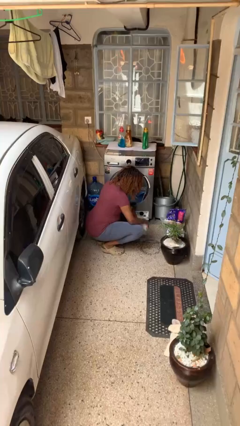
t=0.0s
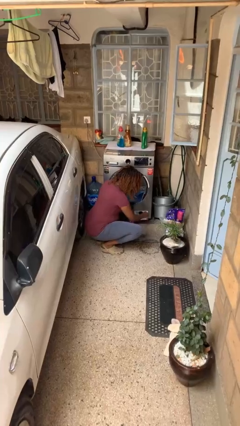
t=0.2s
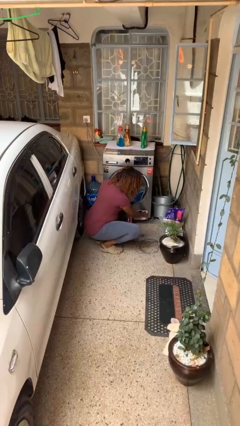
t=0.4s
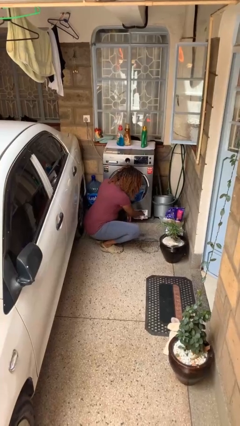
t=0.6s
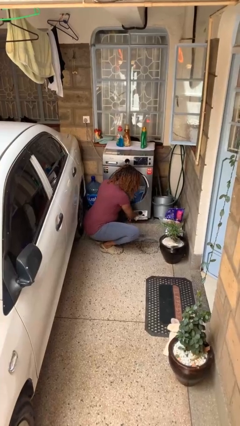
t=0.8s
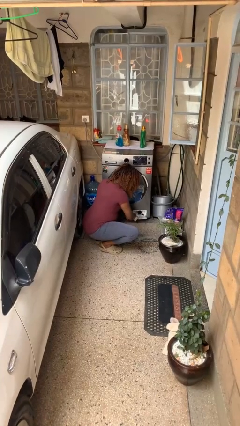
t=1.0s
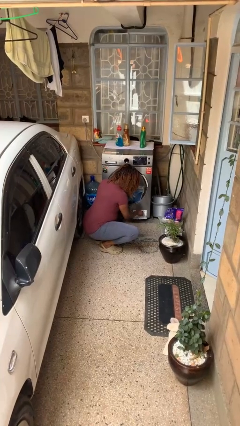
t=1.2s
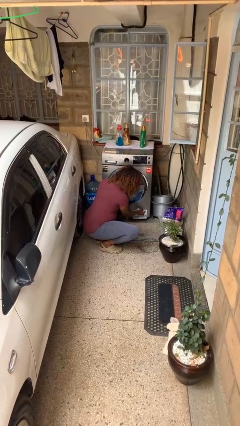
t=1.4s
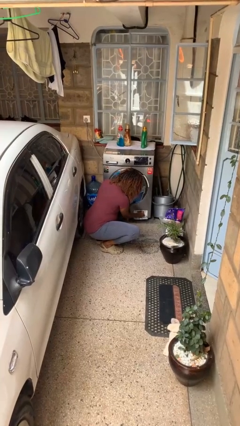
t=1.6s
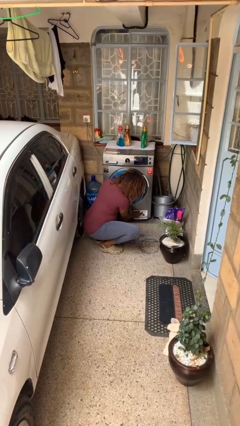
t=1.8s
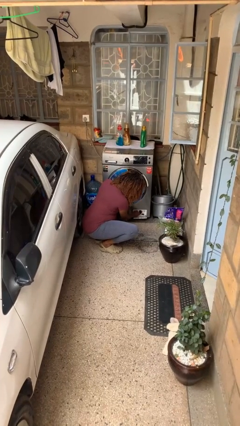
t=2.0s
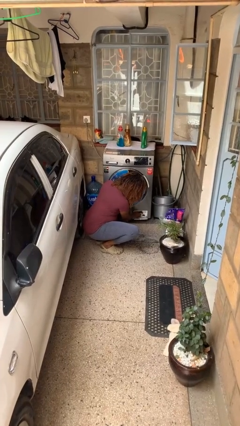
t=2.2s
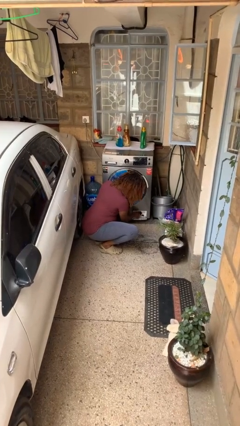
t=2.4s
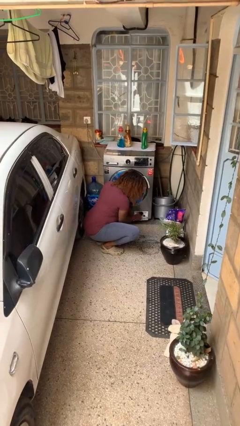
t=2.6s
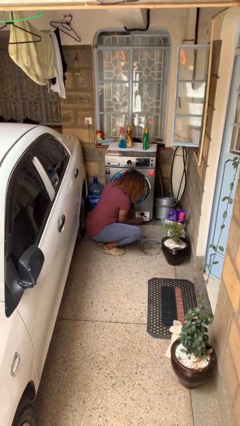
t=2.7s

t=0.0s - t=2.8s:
person cleans dryer lint trap

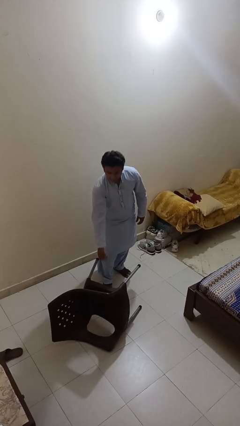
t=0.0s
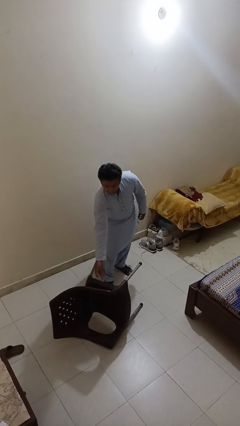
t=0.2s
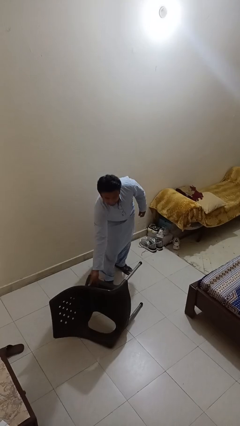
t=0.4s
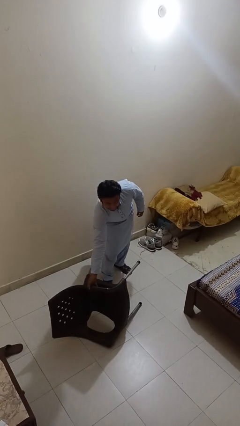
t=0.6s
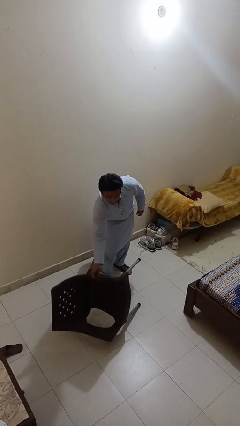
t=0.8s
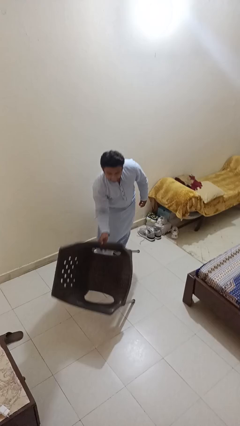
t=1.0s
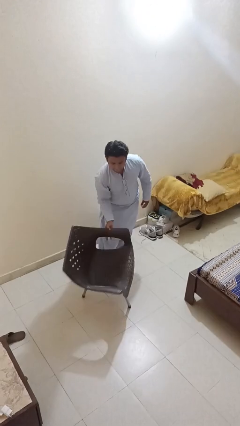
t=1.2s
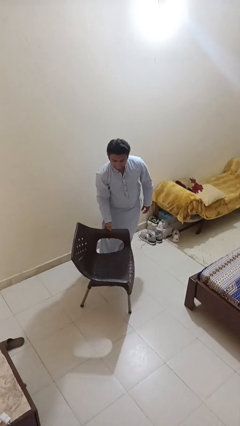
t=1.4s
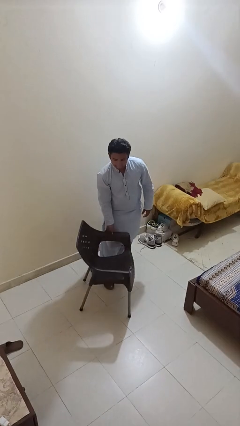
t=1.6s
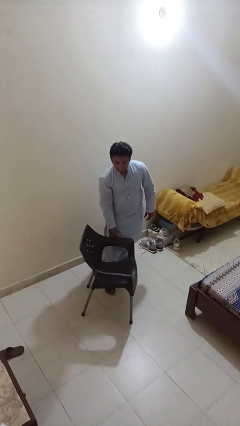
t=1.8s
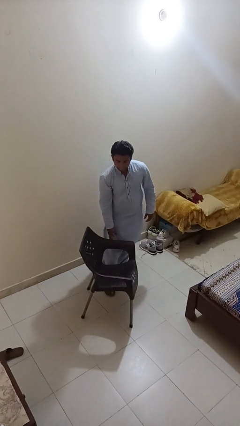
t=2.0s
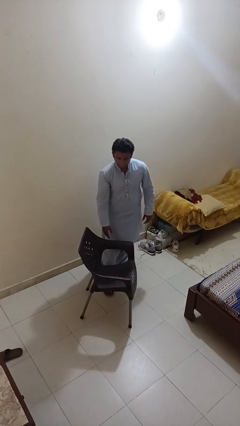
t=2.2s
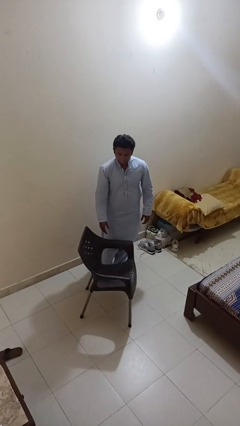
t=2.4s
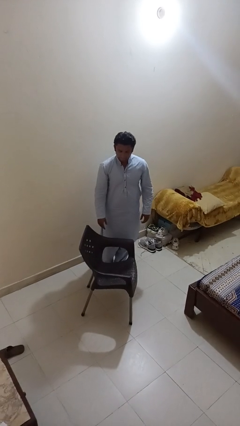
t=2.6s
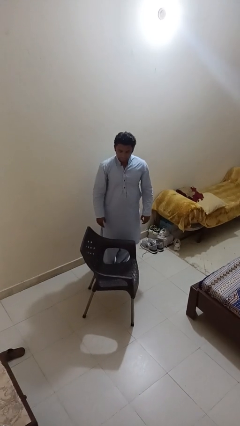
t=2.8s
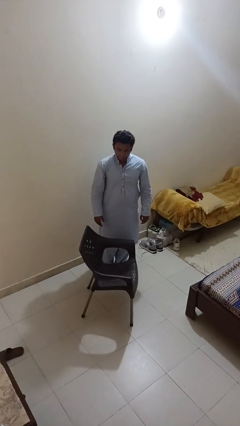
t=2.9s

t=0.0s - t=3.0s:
person sets upright furniture

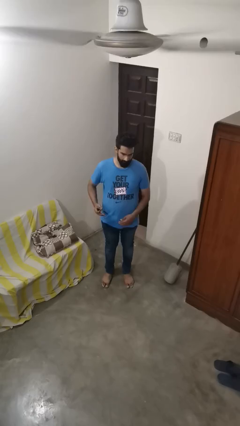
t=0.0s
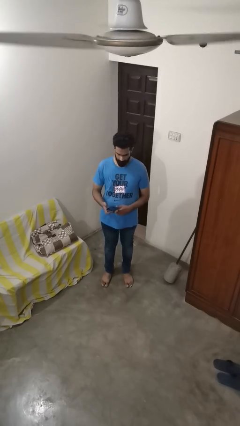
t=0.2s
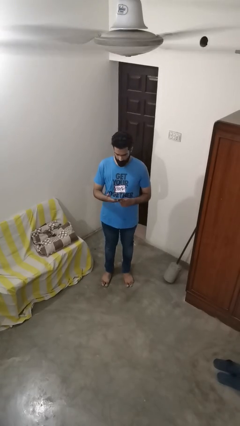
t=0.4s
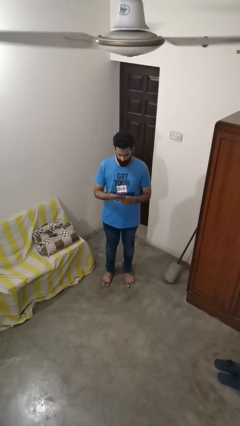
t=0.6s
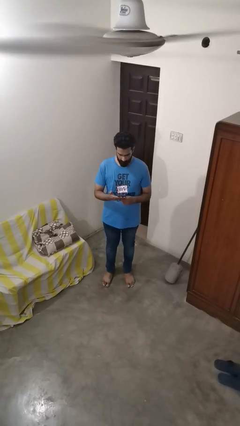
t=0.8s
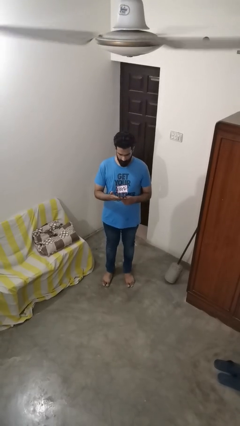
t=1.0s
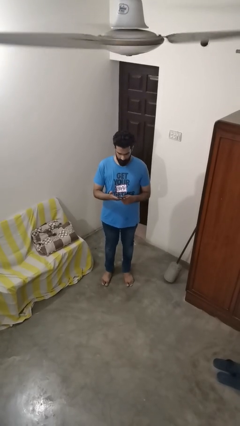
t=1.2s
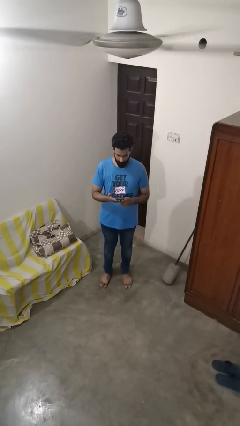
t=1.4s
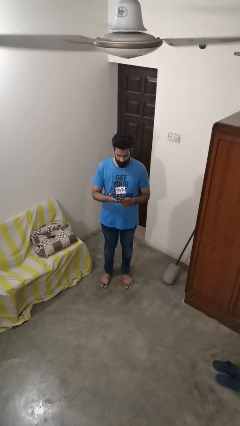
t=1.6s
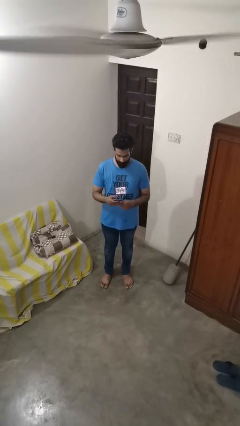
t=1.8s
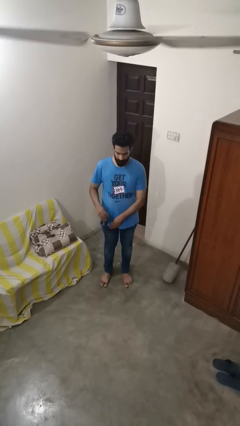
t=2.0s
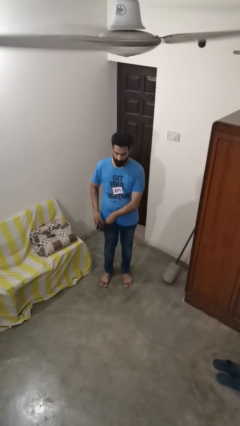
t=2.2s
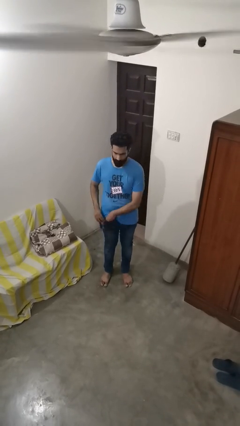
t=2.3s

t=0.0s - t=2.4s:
person takes phone from pocket

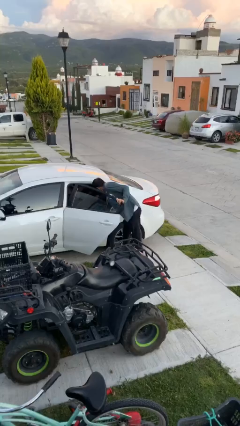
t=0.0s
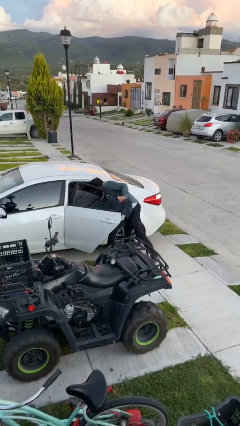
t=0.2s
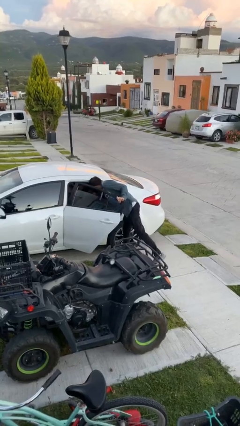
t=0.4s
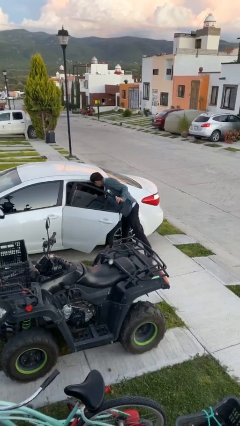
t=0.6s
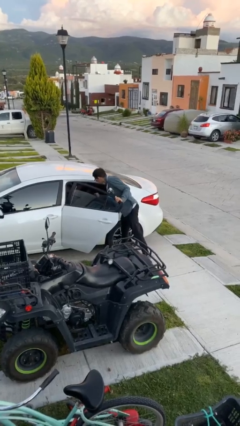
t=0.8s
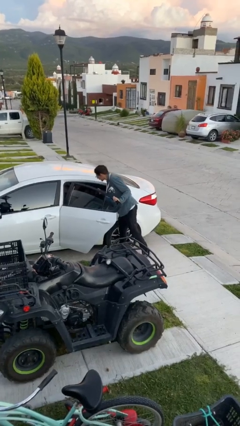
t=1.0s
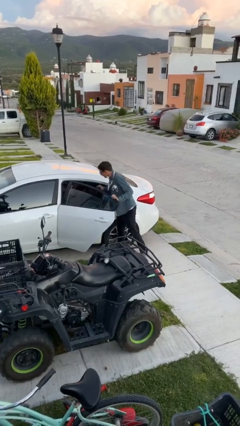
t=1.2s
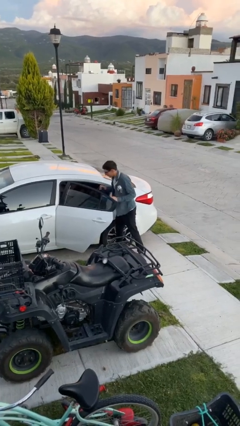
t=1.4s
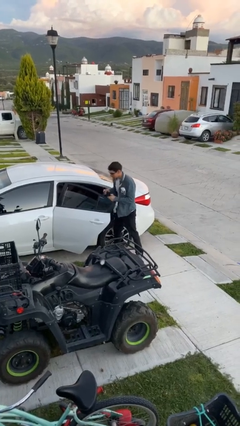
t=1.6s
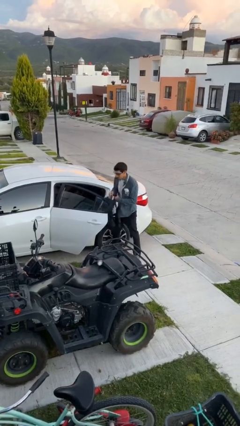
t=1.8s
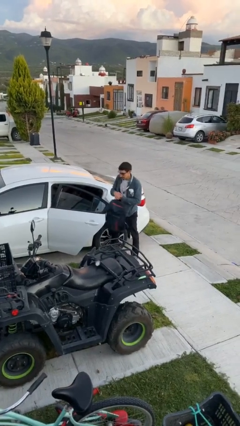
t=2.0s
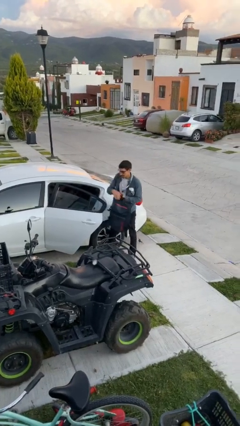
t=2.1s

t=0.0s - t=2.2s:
person unloads car

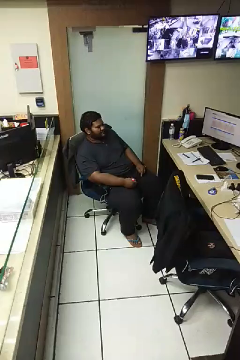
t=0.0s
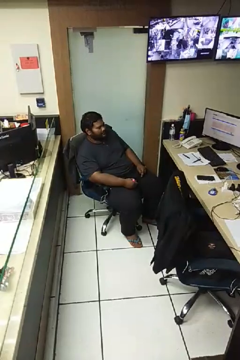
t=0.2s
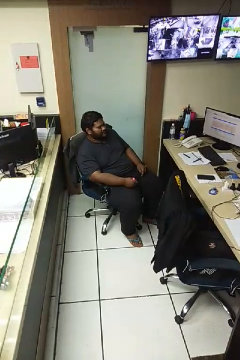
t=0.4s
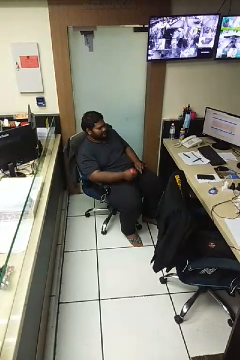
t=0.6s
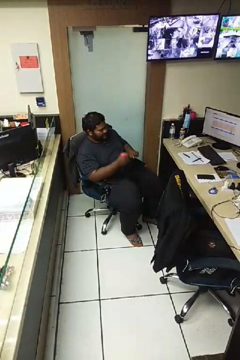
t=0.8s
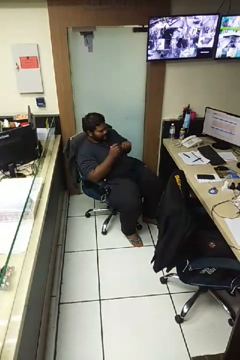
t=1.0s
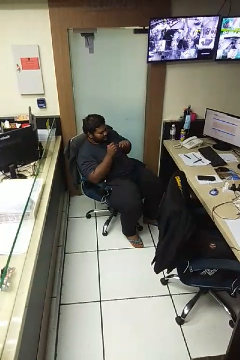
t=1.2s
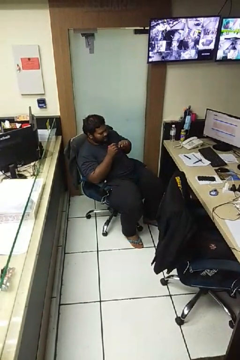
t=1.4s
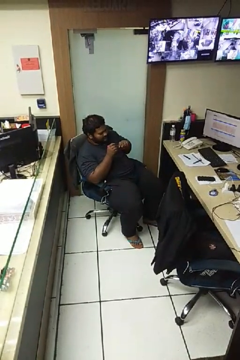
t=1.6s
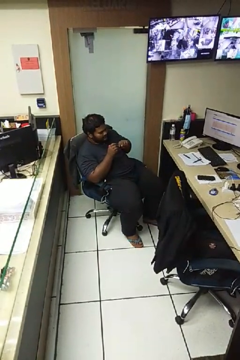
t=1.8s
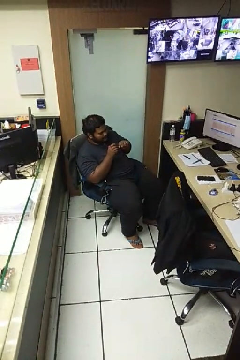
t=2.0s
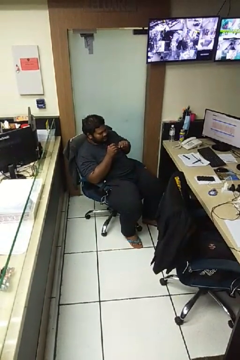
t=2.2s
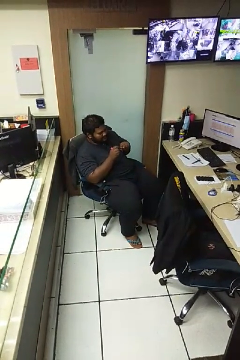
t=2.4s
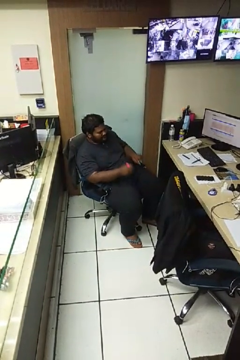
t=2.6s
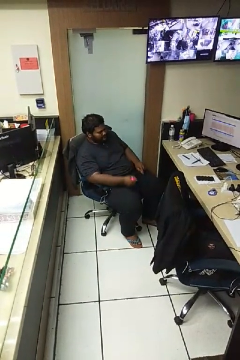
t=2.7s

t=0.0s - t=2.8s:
person paints fingernails

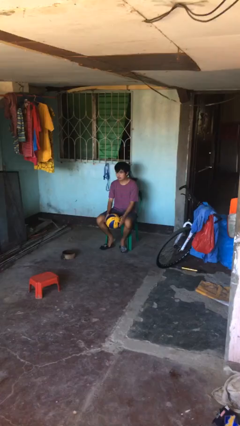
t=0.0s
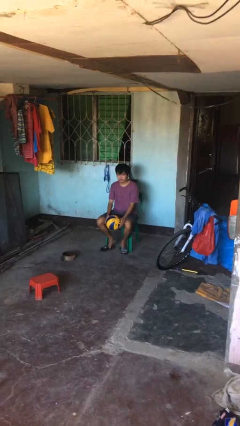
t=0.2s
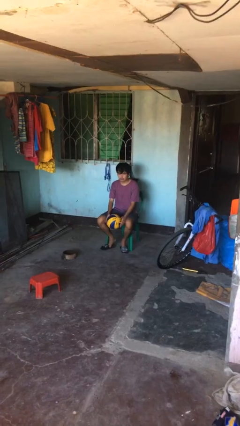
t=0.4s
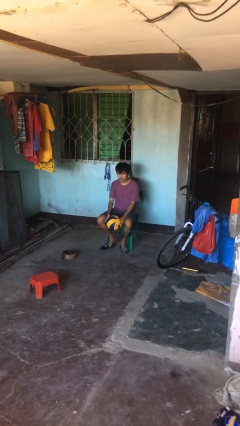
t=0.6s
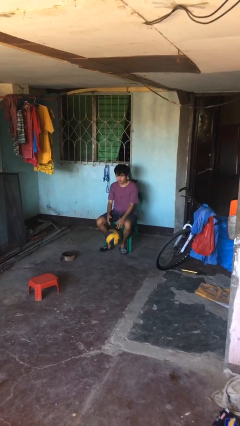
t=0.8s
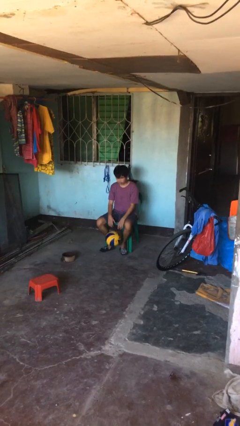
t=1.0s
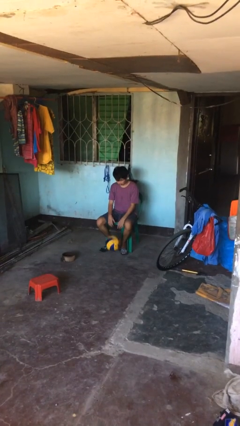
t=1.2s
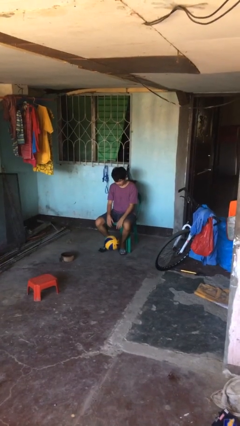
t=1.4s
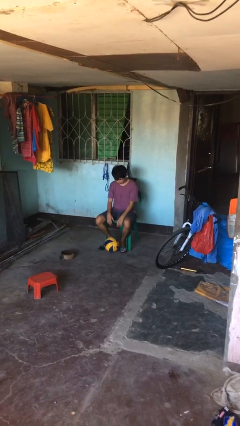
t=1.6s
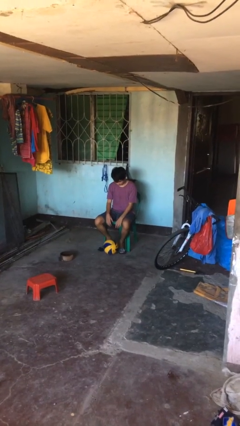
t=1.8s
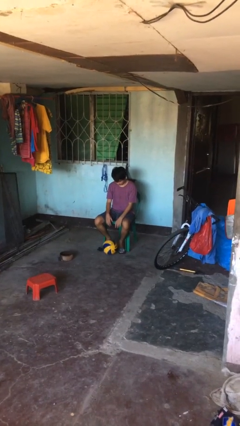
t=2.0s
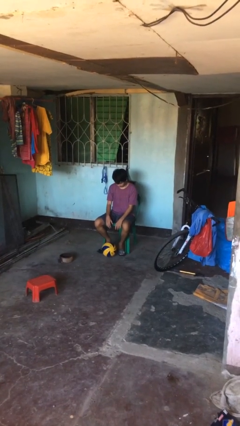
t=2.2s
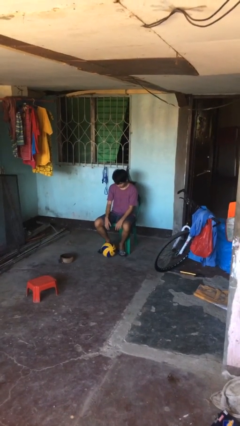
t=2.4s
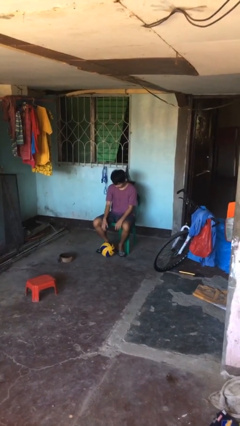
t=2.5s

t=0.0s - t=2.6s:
person drops object

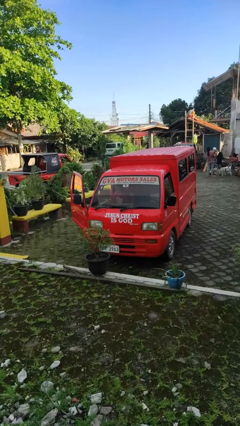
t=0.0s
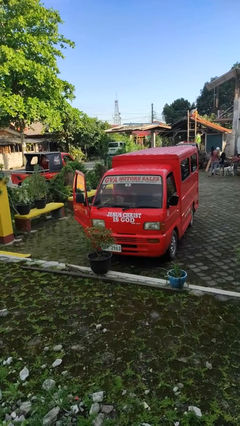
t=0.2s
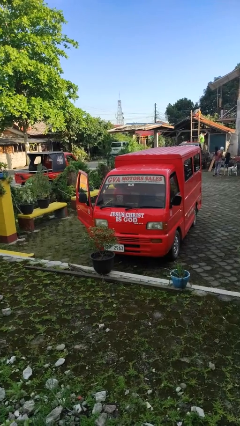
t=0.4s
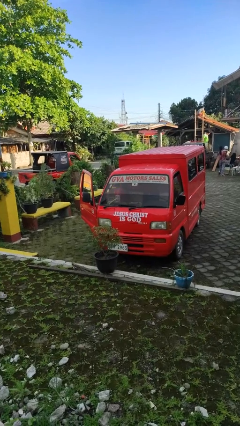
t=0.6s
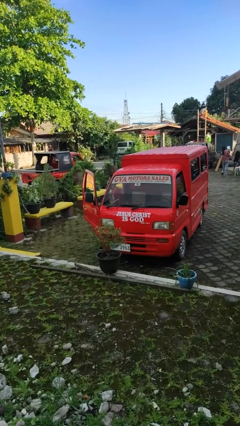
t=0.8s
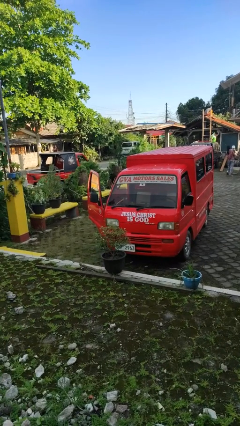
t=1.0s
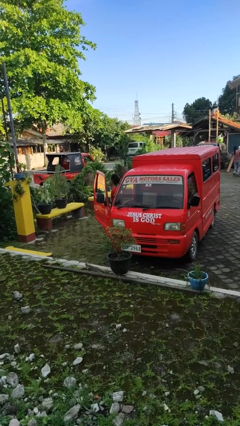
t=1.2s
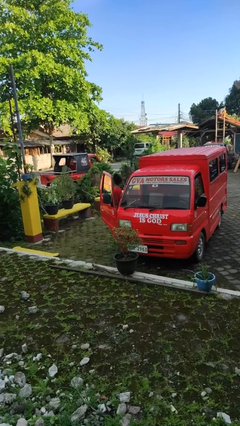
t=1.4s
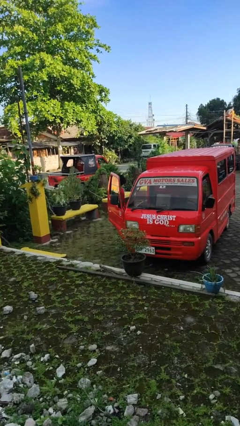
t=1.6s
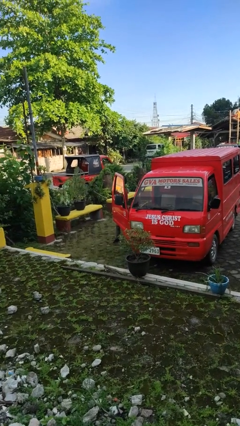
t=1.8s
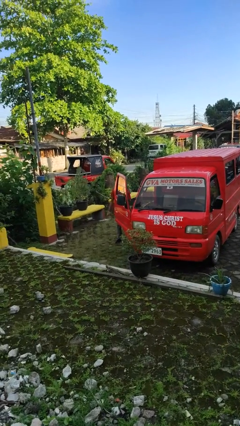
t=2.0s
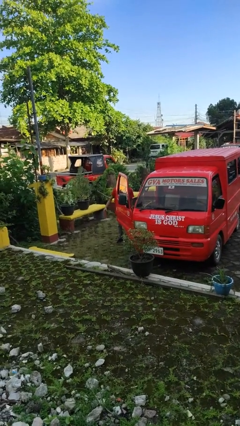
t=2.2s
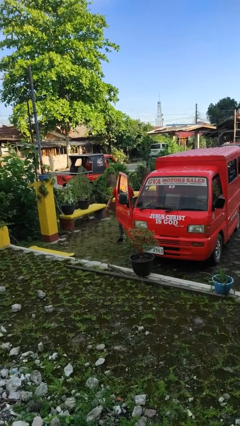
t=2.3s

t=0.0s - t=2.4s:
person exits car
